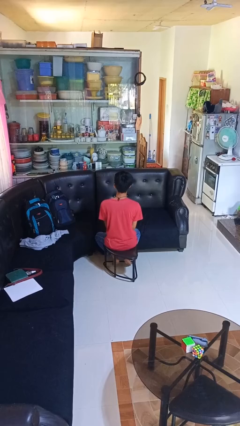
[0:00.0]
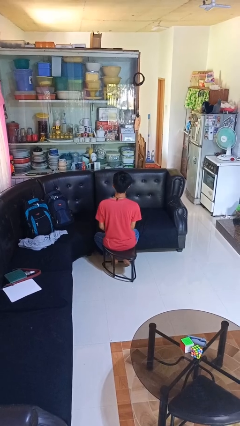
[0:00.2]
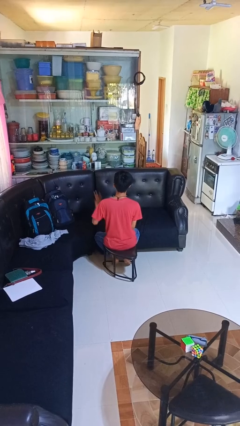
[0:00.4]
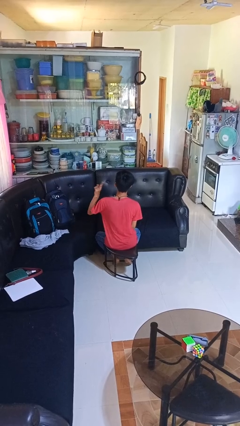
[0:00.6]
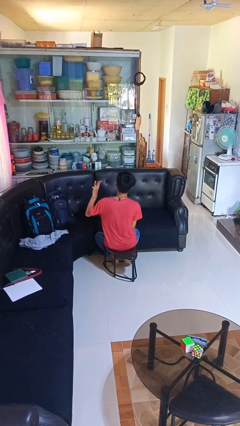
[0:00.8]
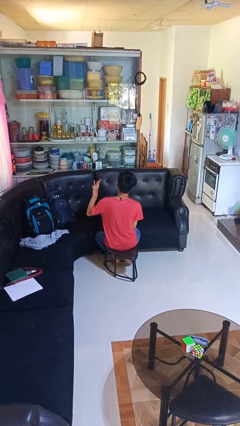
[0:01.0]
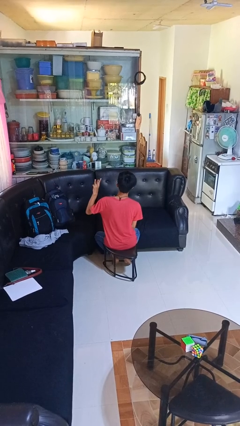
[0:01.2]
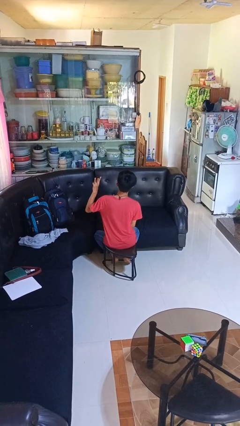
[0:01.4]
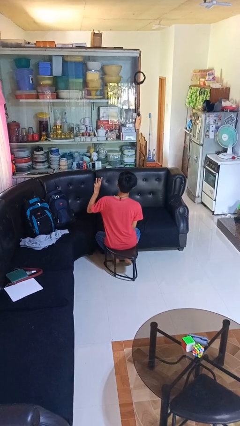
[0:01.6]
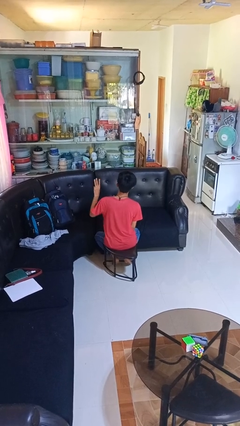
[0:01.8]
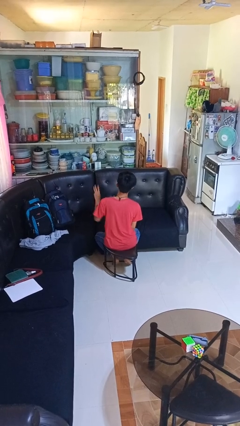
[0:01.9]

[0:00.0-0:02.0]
person gestures number three

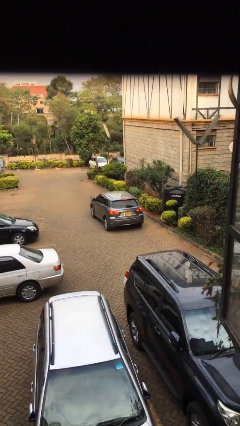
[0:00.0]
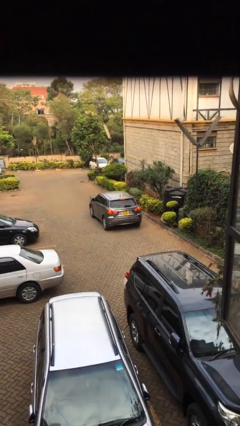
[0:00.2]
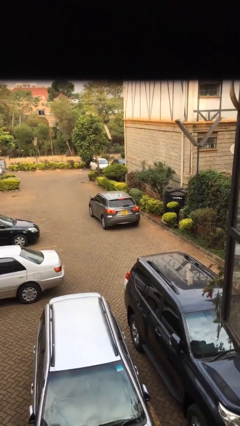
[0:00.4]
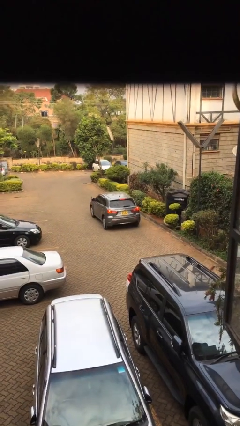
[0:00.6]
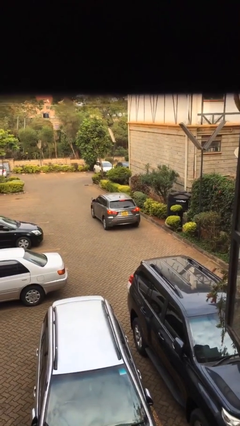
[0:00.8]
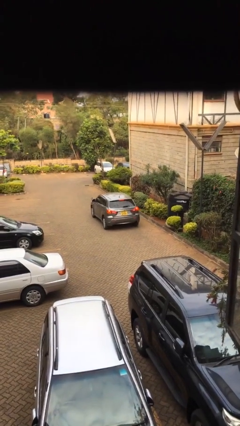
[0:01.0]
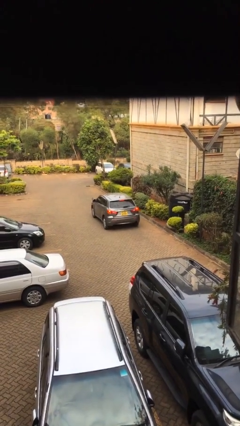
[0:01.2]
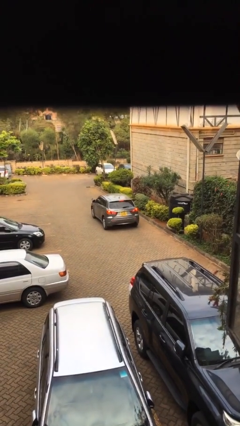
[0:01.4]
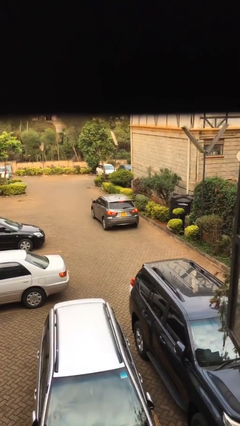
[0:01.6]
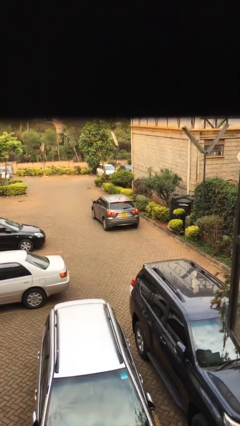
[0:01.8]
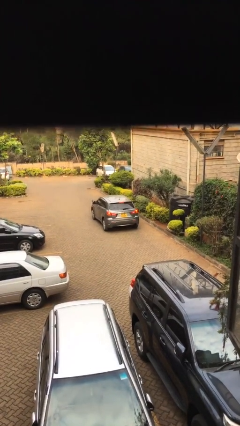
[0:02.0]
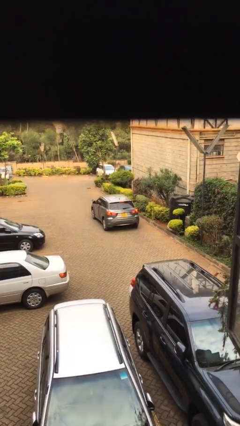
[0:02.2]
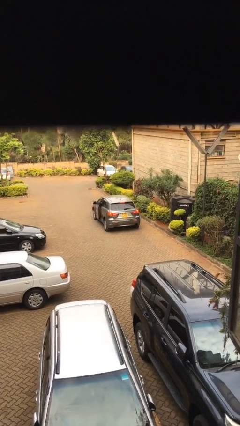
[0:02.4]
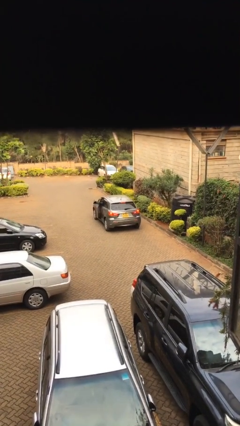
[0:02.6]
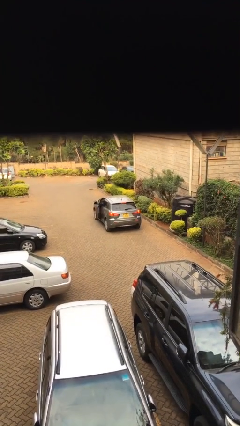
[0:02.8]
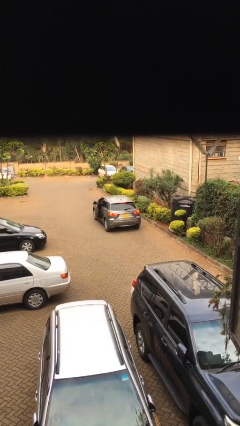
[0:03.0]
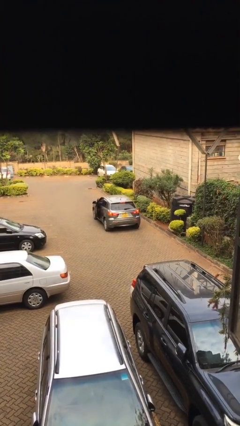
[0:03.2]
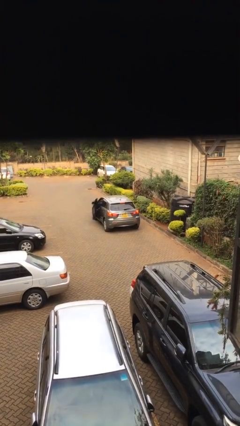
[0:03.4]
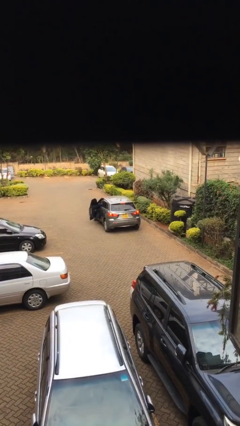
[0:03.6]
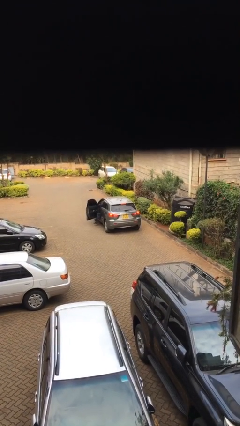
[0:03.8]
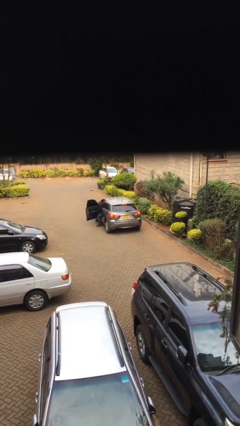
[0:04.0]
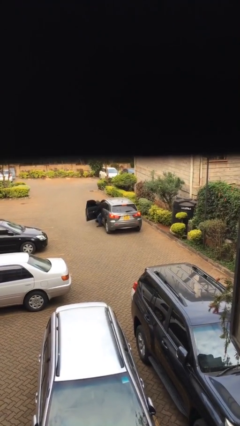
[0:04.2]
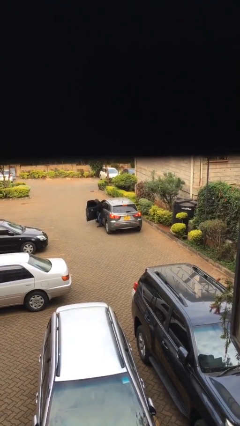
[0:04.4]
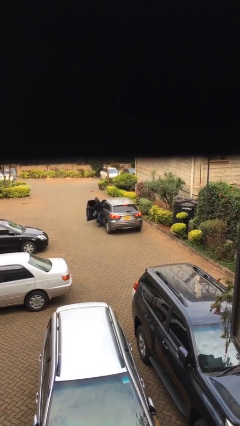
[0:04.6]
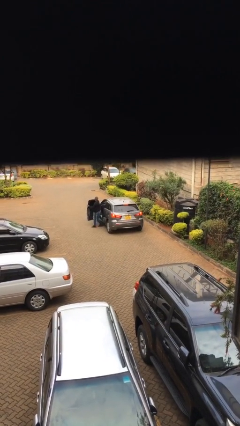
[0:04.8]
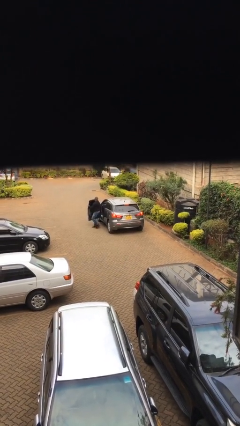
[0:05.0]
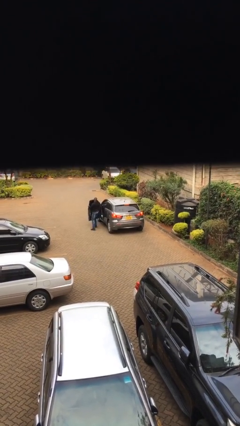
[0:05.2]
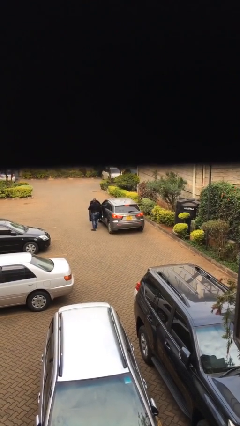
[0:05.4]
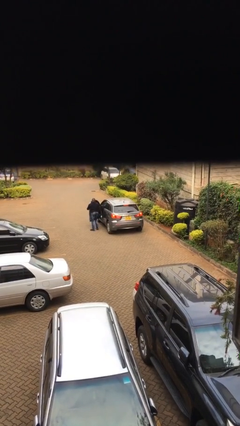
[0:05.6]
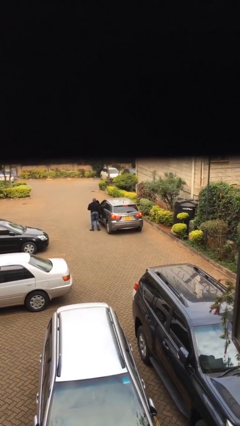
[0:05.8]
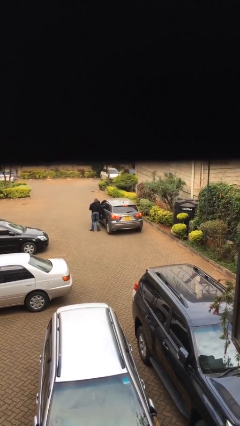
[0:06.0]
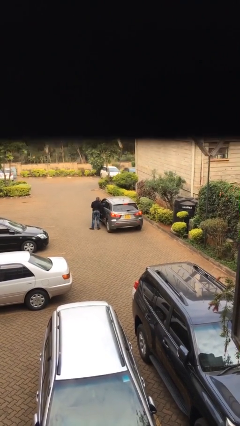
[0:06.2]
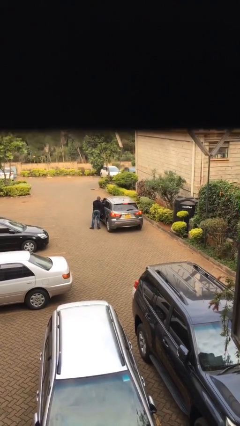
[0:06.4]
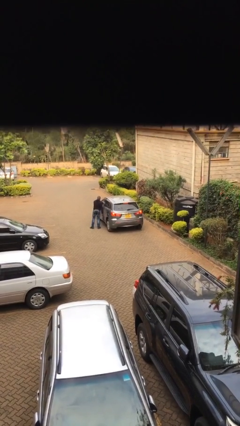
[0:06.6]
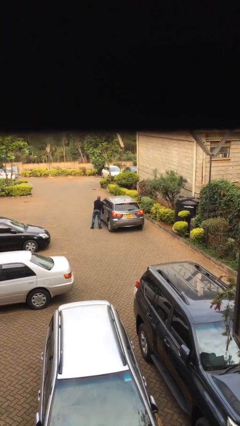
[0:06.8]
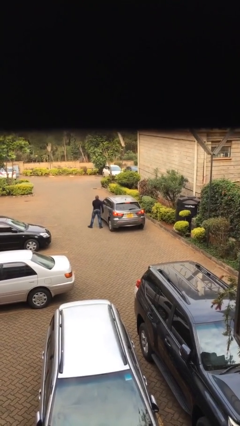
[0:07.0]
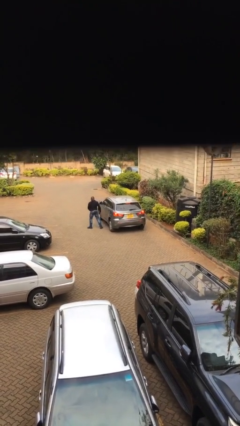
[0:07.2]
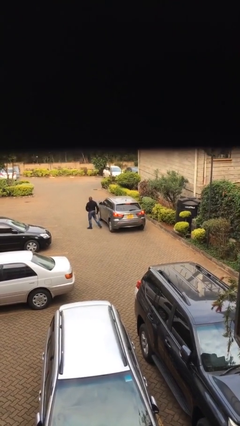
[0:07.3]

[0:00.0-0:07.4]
car drops off person

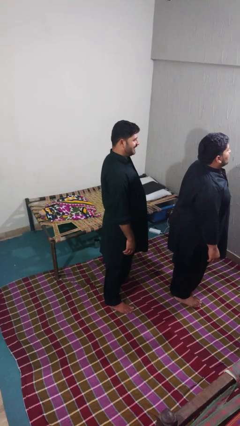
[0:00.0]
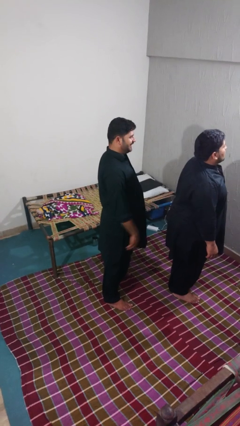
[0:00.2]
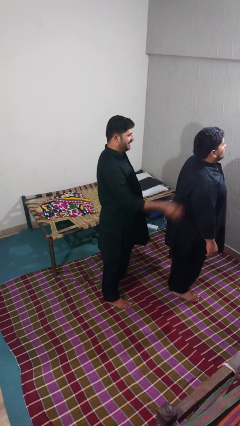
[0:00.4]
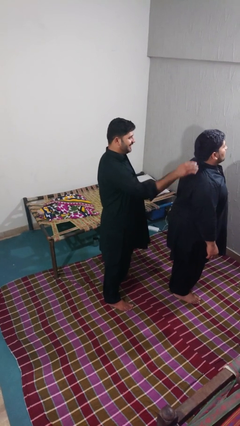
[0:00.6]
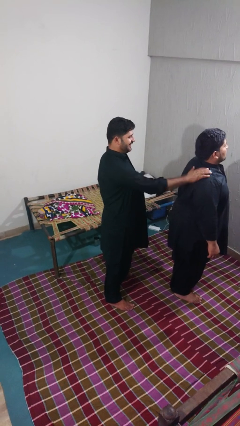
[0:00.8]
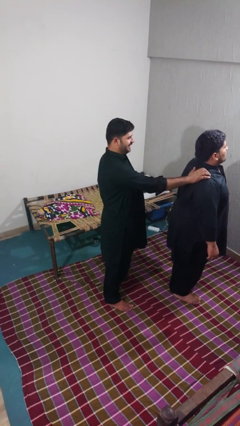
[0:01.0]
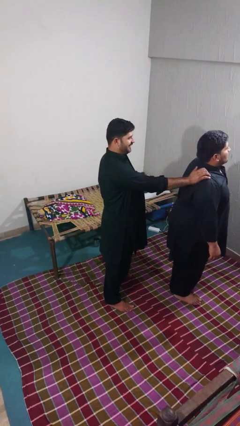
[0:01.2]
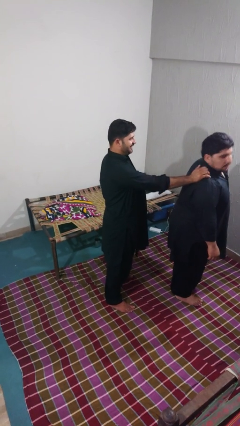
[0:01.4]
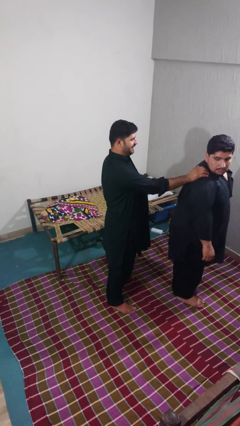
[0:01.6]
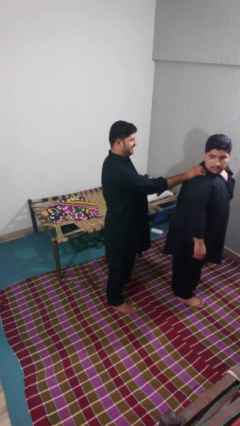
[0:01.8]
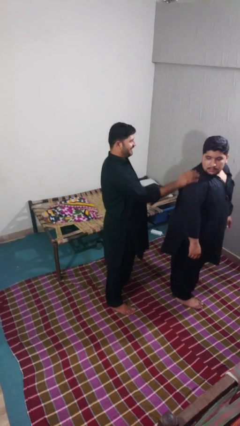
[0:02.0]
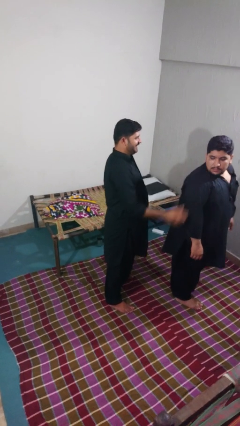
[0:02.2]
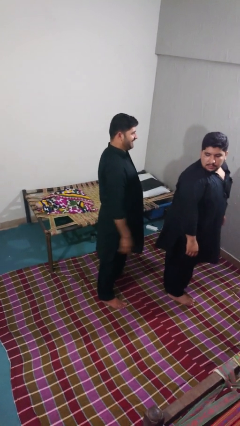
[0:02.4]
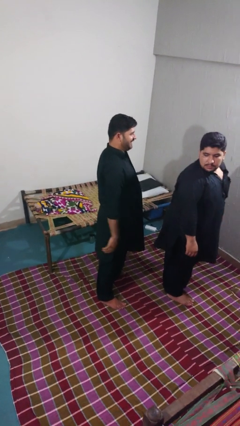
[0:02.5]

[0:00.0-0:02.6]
person touches back of person

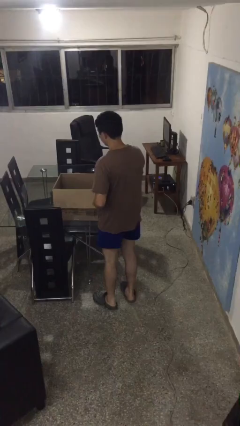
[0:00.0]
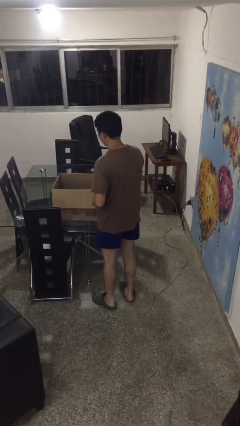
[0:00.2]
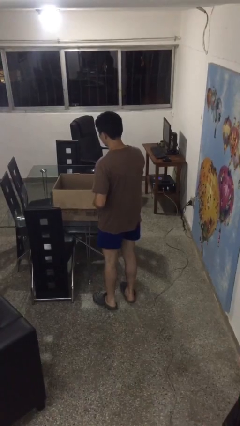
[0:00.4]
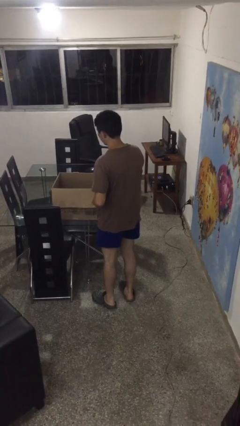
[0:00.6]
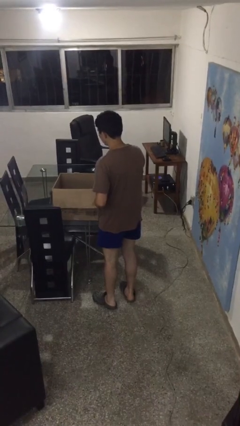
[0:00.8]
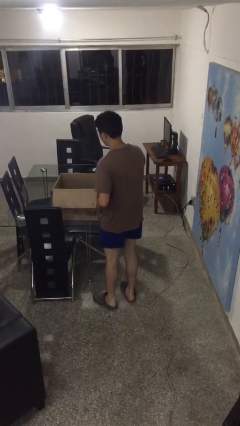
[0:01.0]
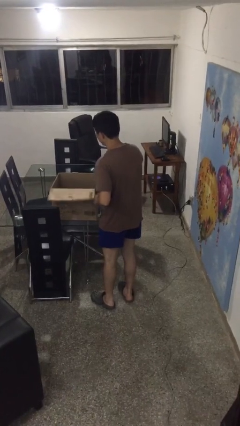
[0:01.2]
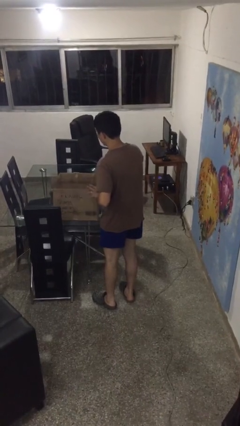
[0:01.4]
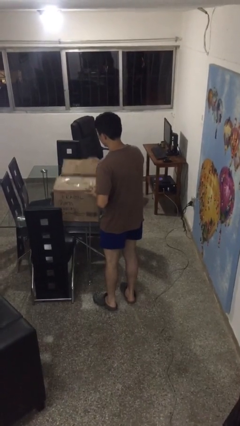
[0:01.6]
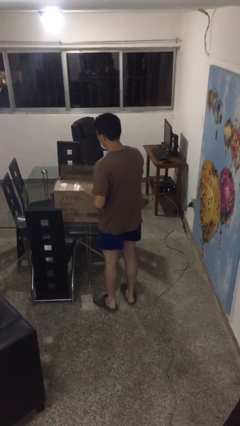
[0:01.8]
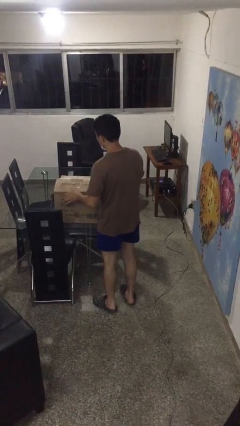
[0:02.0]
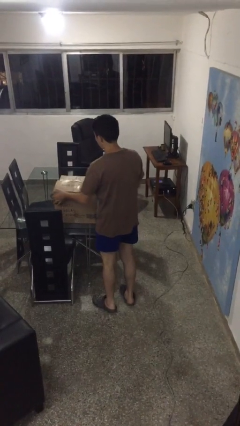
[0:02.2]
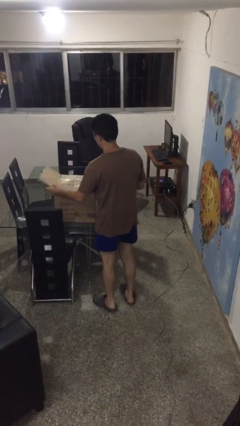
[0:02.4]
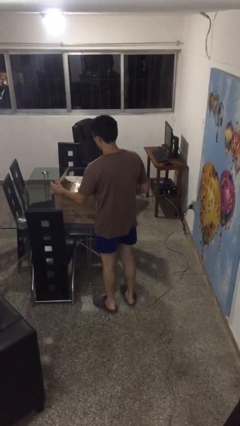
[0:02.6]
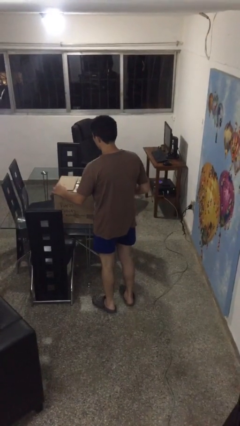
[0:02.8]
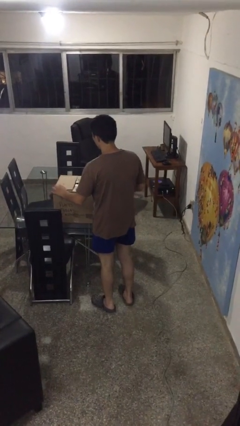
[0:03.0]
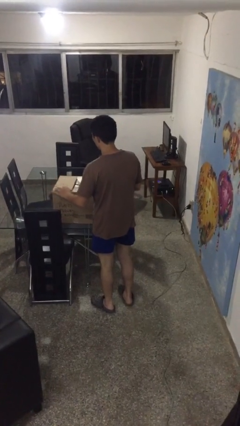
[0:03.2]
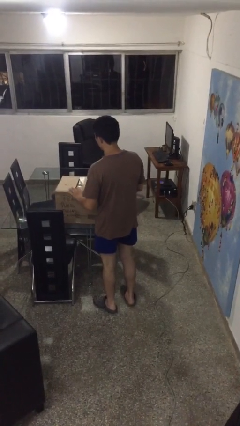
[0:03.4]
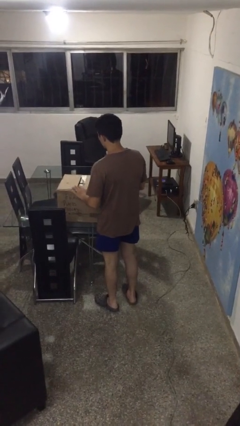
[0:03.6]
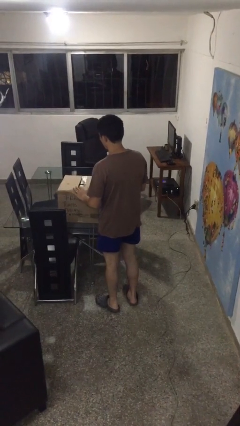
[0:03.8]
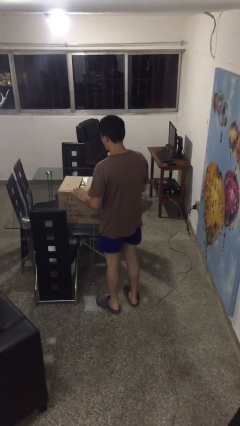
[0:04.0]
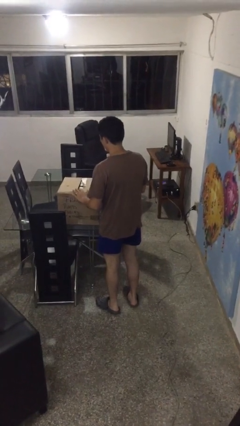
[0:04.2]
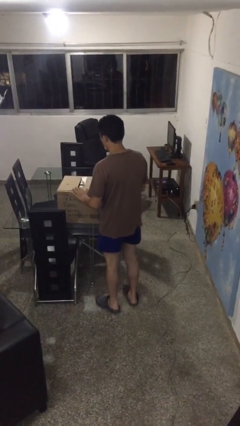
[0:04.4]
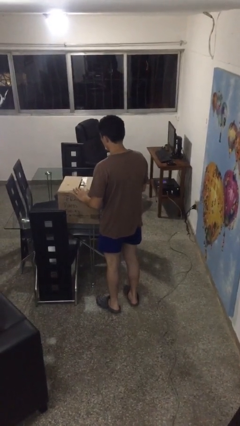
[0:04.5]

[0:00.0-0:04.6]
person closes box

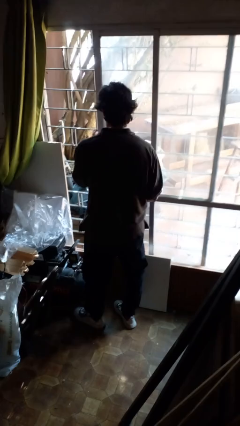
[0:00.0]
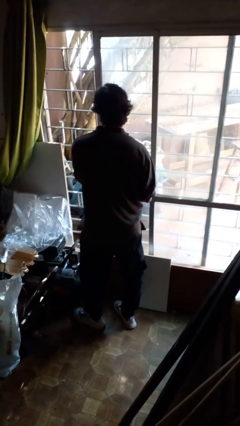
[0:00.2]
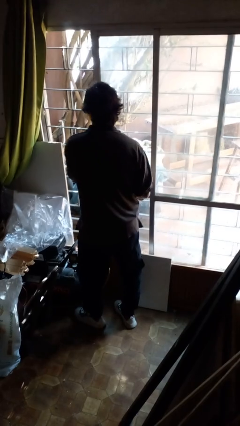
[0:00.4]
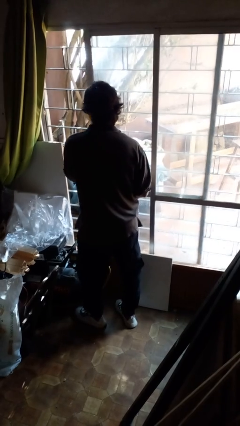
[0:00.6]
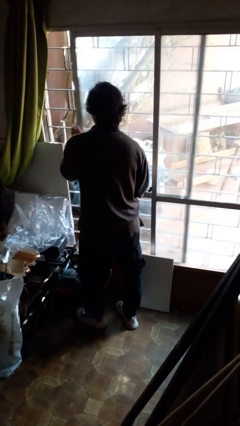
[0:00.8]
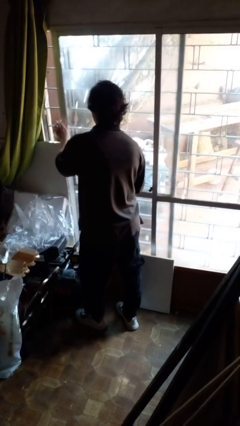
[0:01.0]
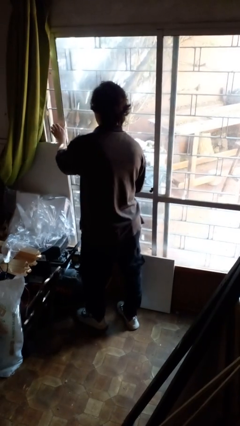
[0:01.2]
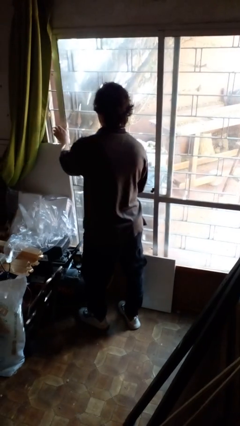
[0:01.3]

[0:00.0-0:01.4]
person closes sliding door
